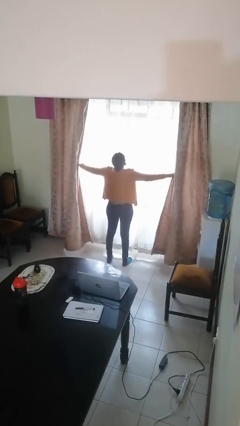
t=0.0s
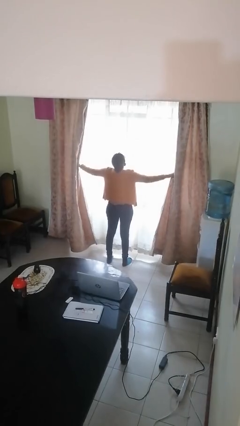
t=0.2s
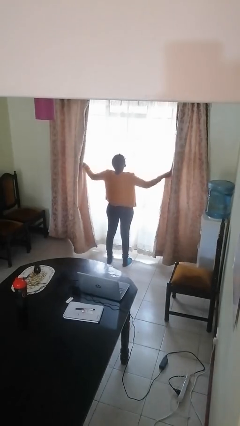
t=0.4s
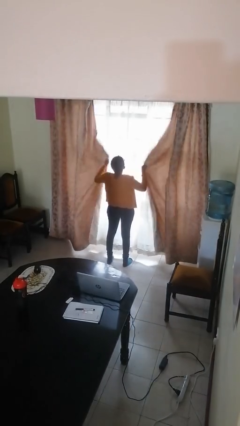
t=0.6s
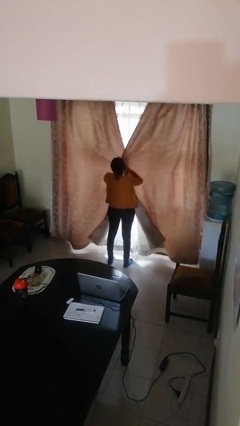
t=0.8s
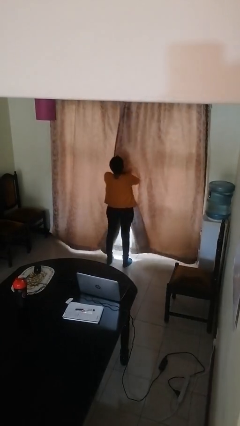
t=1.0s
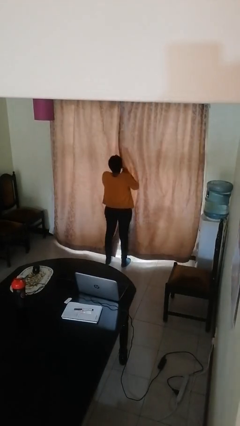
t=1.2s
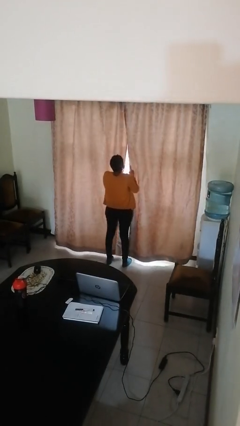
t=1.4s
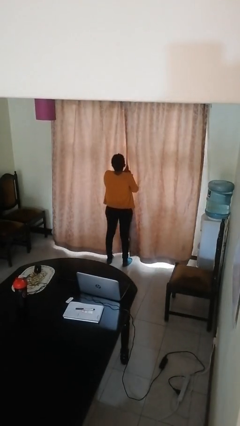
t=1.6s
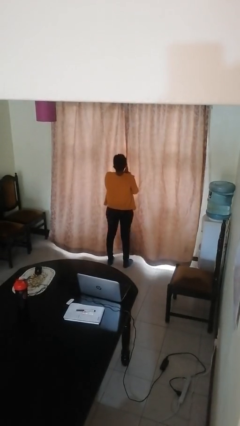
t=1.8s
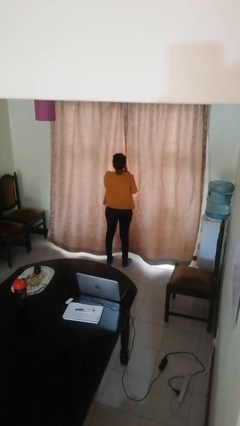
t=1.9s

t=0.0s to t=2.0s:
person closes curtains

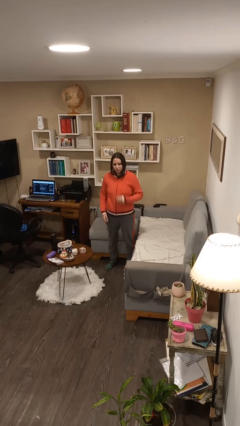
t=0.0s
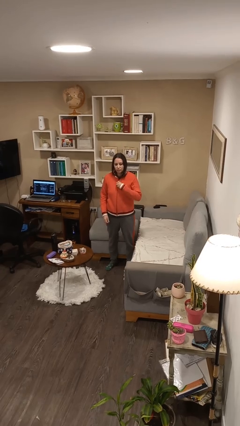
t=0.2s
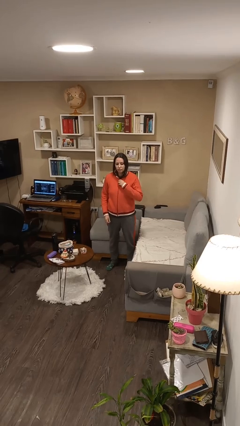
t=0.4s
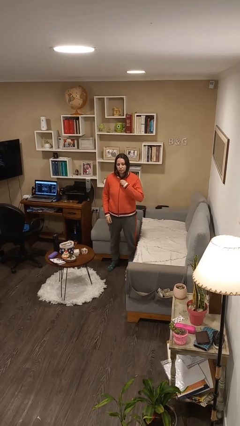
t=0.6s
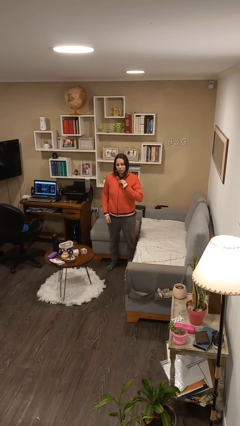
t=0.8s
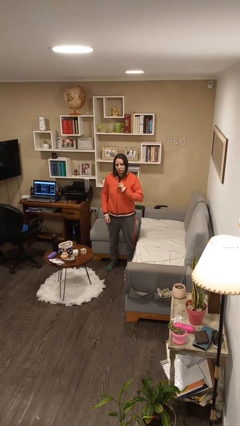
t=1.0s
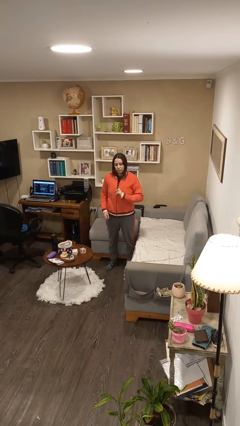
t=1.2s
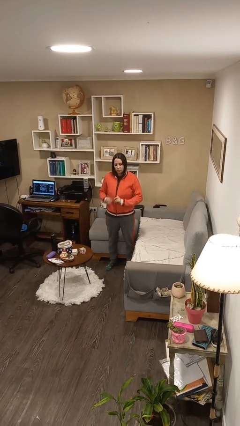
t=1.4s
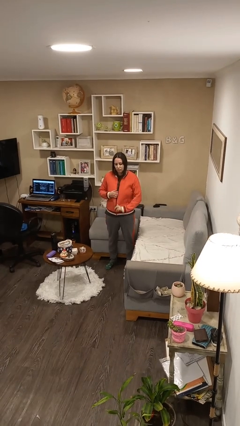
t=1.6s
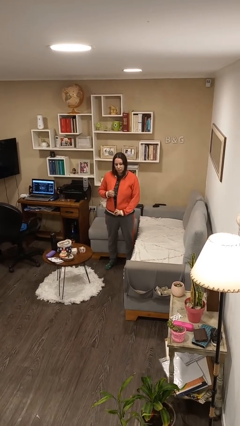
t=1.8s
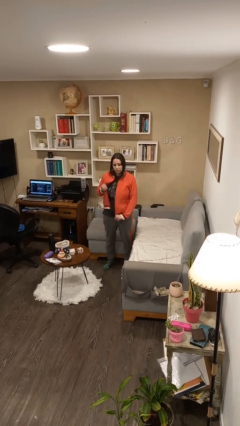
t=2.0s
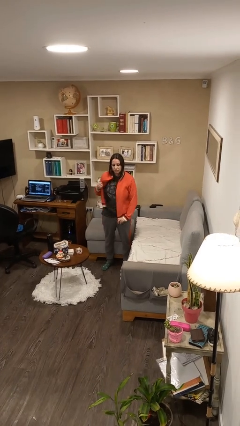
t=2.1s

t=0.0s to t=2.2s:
person unzips jacket

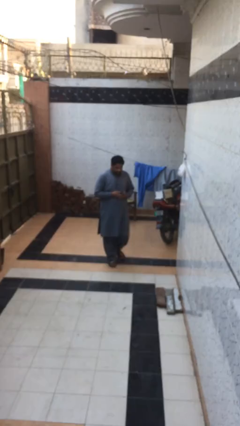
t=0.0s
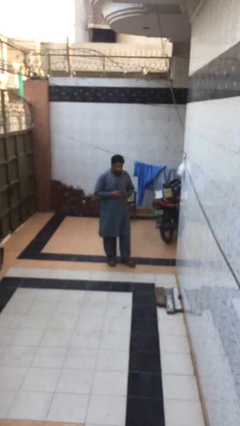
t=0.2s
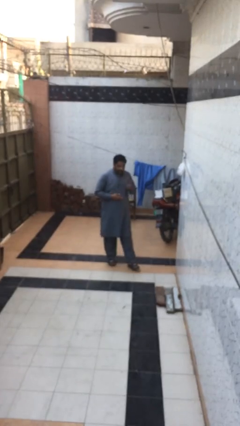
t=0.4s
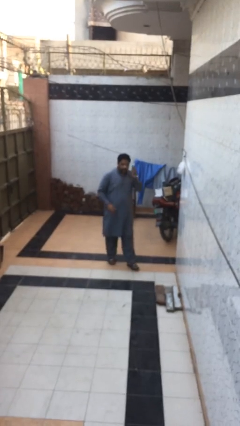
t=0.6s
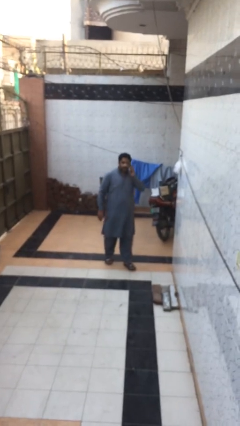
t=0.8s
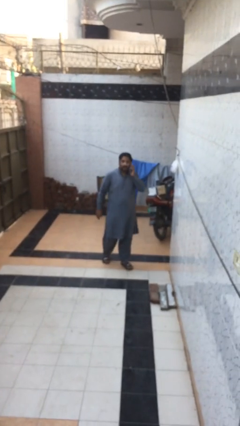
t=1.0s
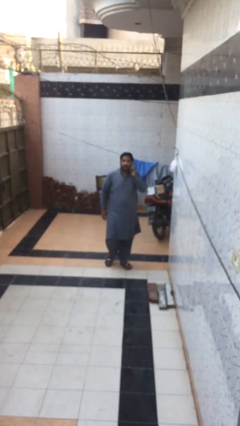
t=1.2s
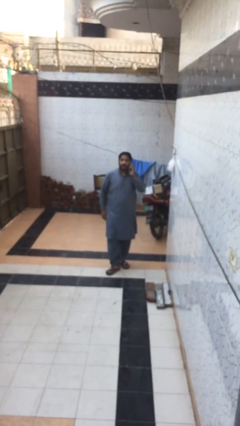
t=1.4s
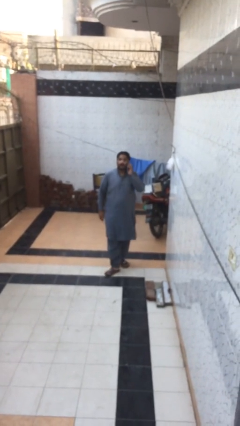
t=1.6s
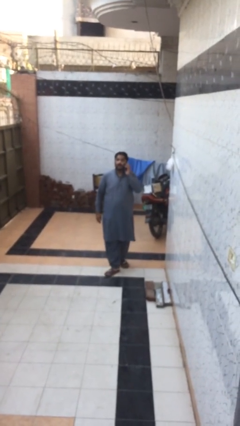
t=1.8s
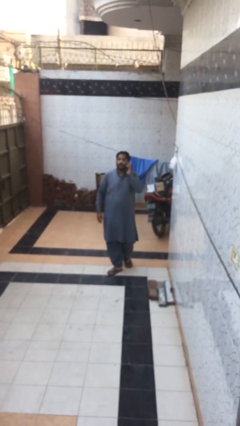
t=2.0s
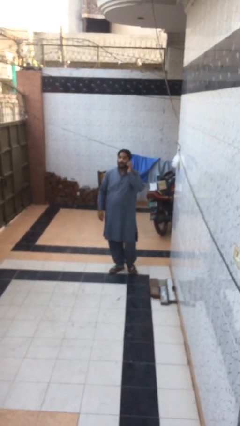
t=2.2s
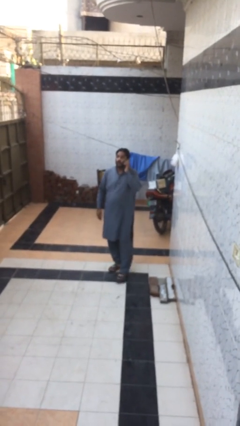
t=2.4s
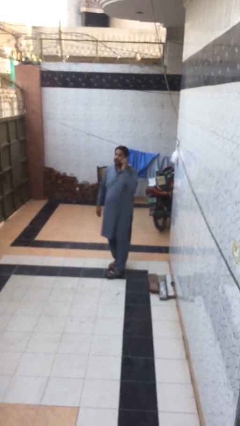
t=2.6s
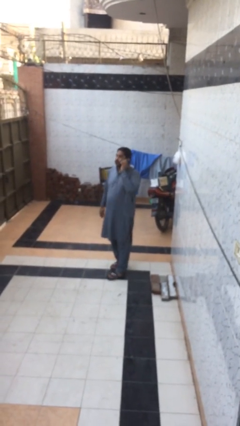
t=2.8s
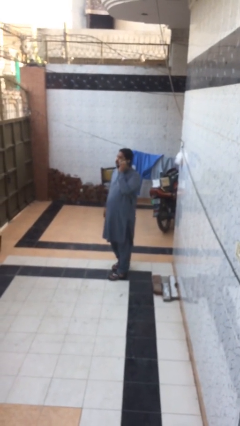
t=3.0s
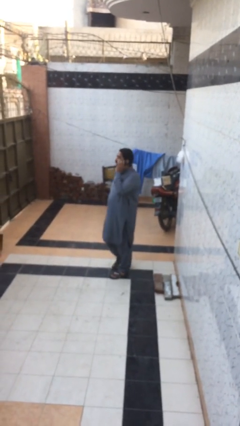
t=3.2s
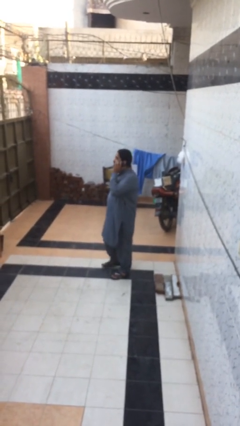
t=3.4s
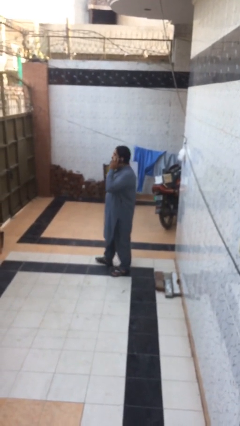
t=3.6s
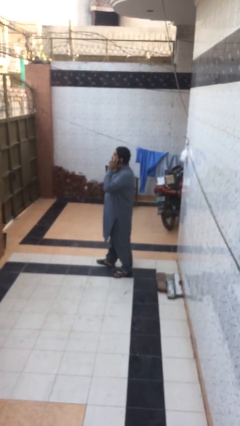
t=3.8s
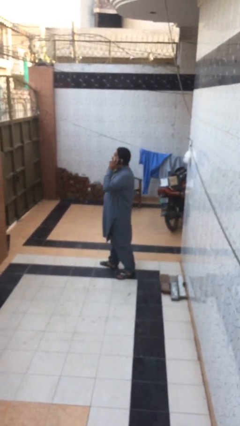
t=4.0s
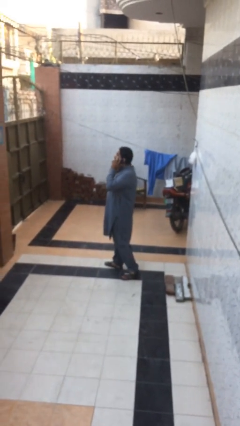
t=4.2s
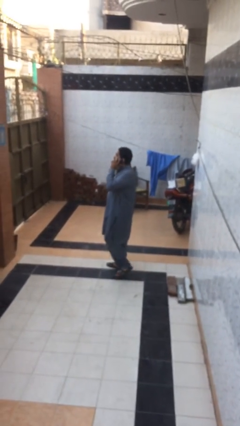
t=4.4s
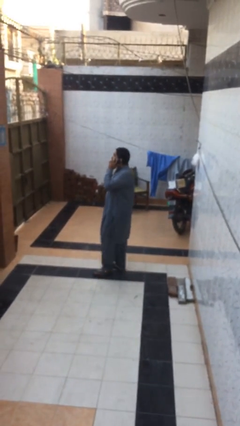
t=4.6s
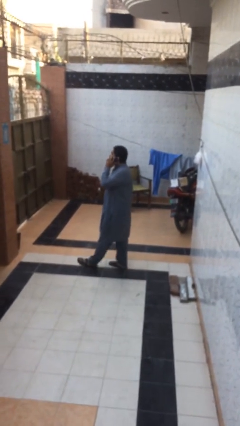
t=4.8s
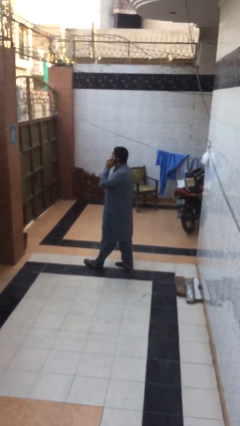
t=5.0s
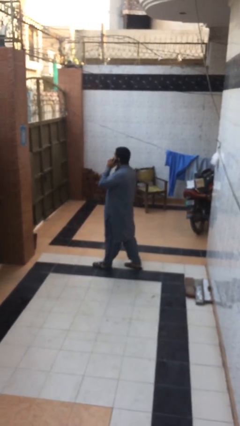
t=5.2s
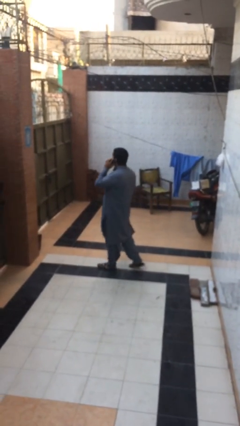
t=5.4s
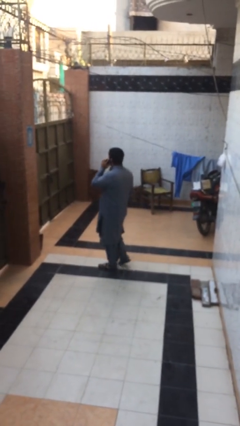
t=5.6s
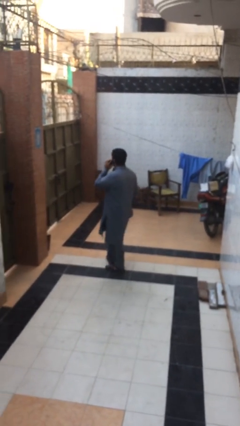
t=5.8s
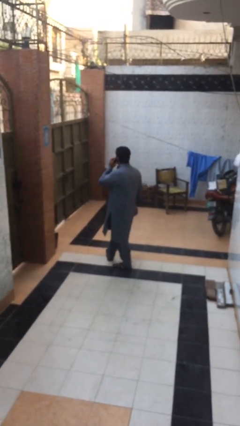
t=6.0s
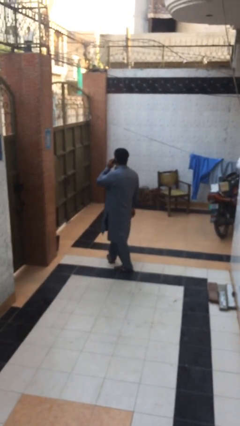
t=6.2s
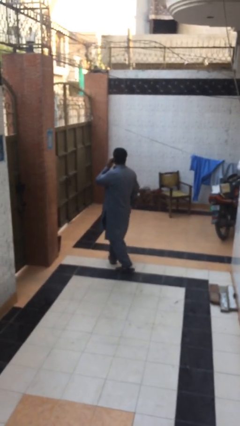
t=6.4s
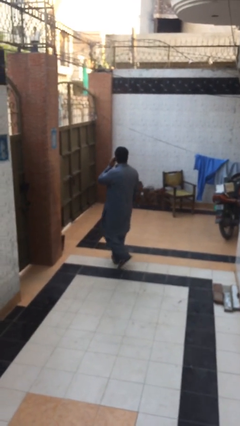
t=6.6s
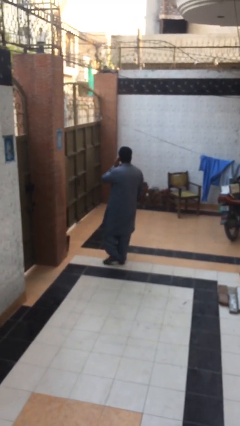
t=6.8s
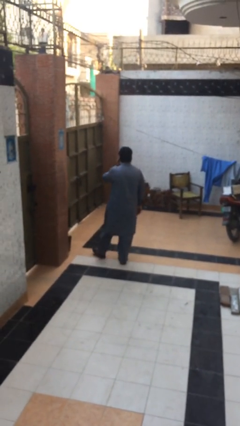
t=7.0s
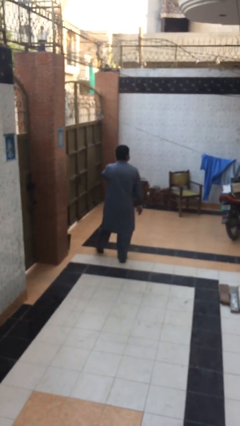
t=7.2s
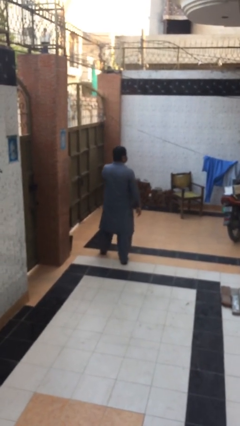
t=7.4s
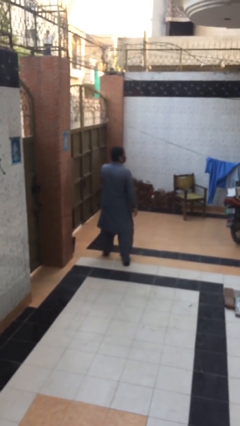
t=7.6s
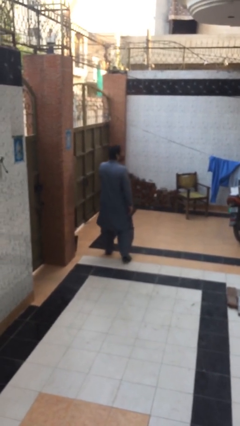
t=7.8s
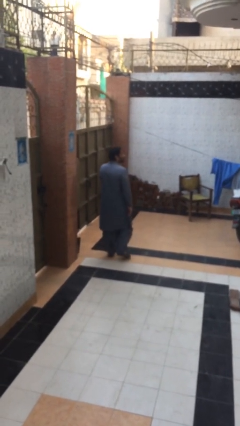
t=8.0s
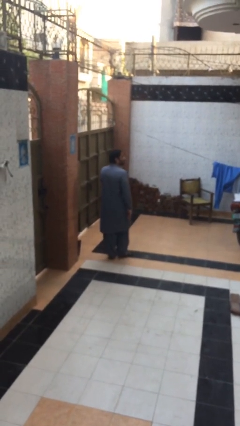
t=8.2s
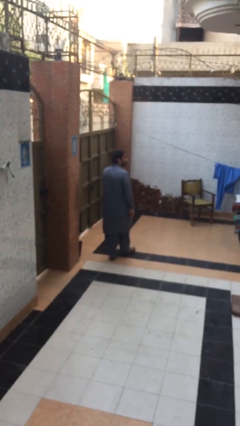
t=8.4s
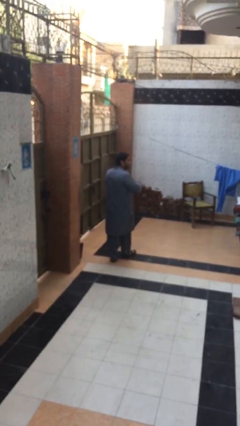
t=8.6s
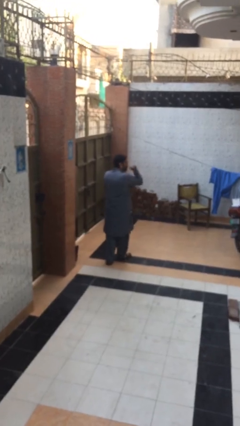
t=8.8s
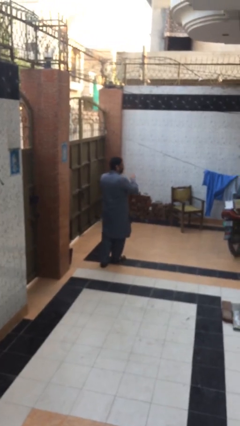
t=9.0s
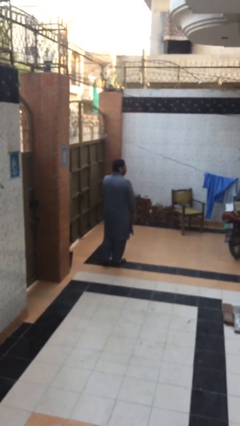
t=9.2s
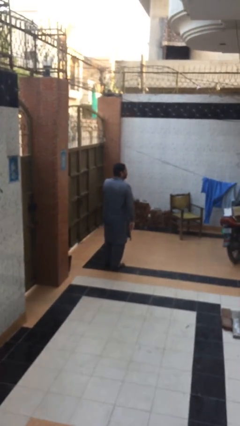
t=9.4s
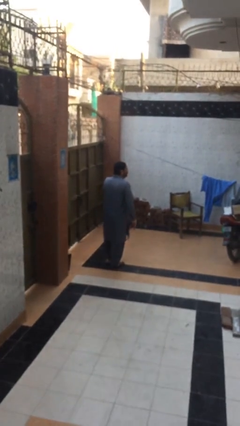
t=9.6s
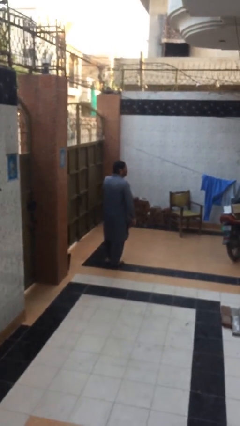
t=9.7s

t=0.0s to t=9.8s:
person talks on phone

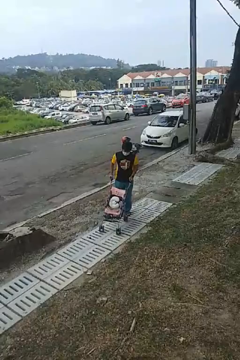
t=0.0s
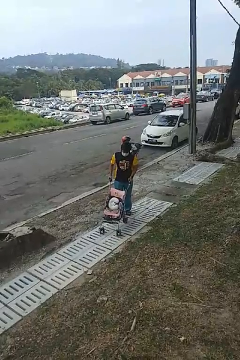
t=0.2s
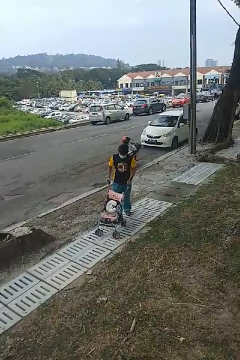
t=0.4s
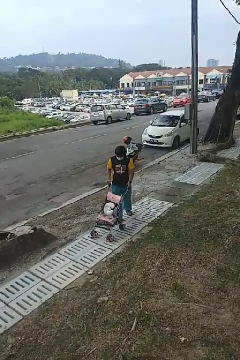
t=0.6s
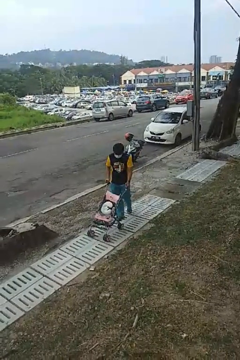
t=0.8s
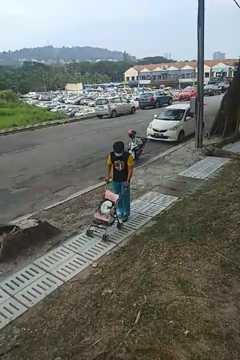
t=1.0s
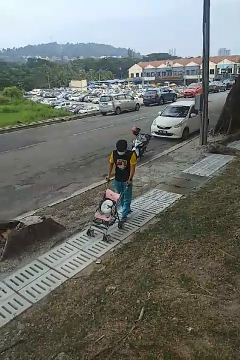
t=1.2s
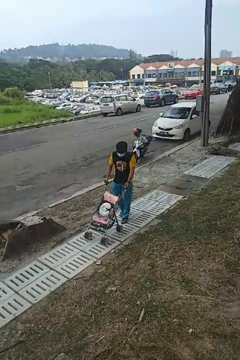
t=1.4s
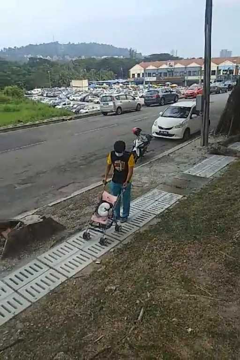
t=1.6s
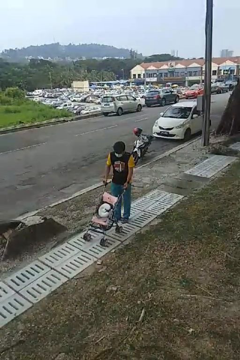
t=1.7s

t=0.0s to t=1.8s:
person pushes wheeled cart

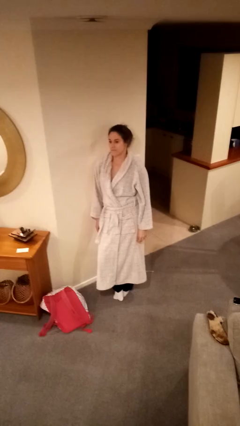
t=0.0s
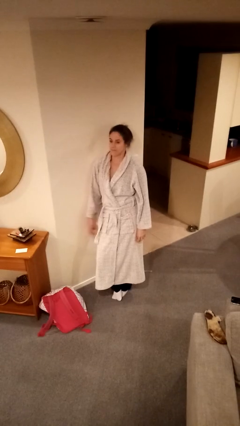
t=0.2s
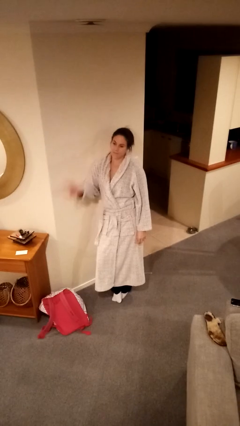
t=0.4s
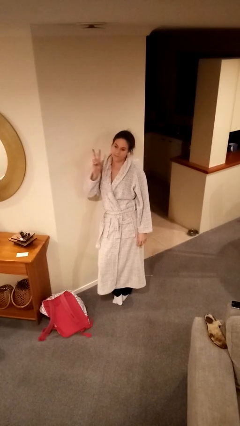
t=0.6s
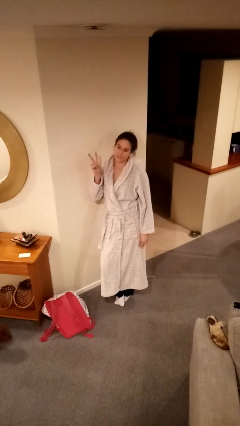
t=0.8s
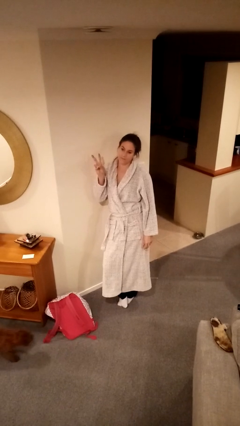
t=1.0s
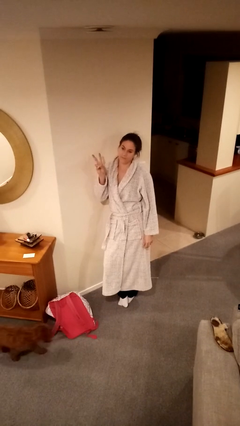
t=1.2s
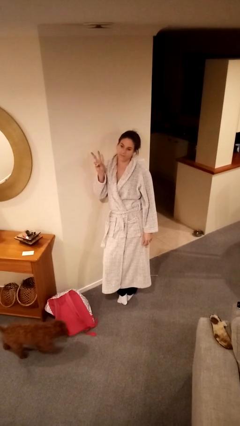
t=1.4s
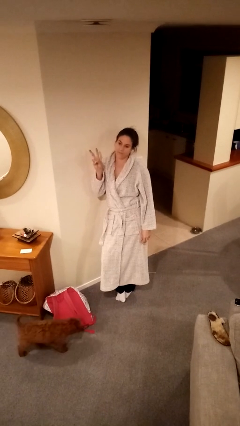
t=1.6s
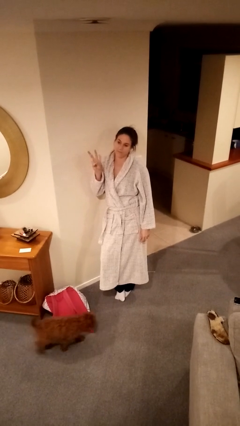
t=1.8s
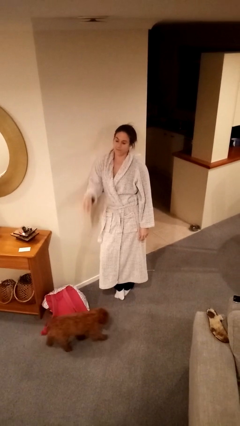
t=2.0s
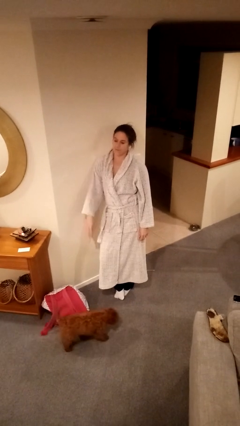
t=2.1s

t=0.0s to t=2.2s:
person gestures peace

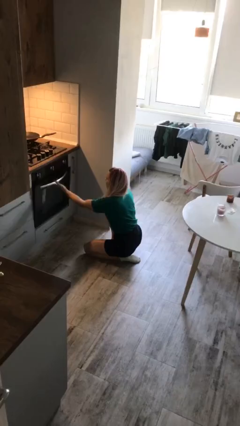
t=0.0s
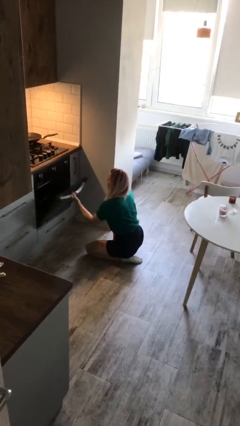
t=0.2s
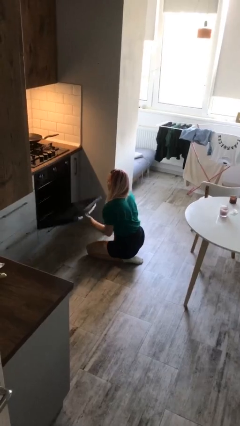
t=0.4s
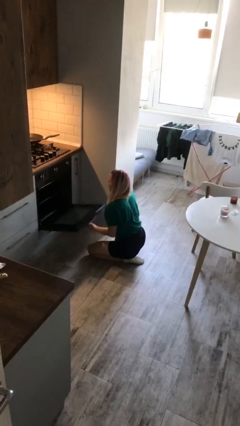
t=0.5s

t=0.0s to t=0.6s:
person opens oven door
